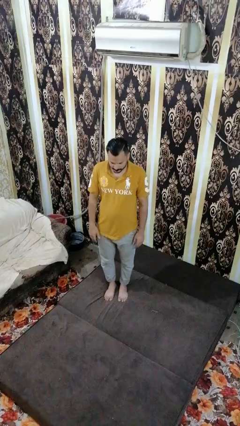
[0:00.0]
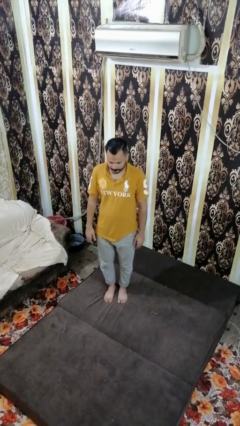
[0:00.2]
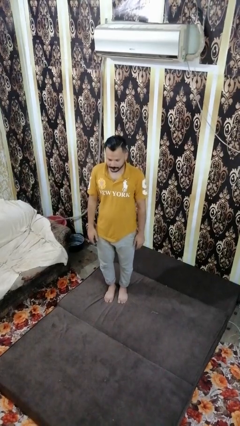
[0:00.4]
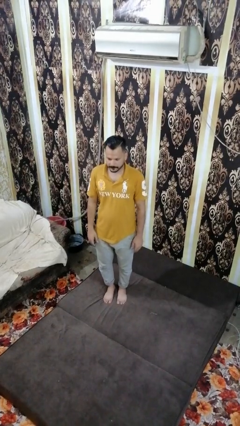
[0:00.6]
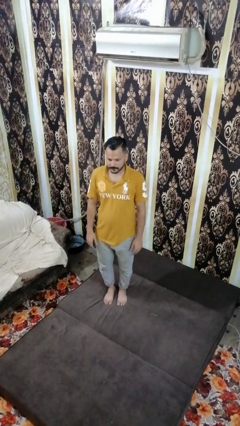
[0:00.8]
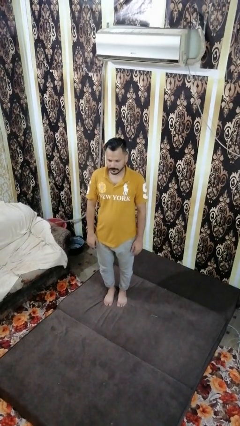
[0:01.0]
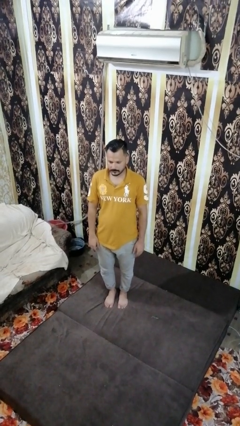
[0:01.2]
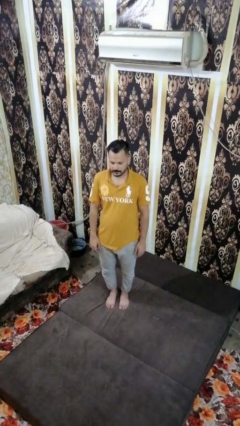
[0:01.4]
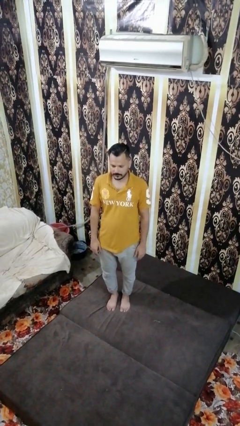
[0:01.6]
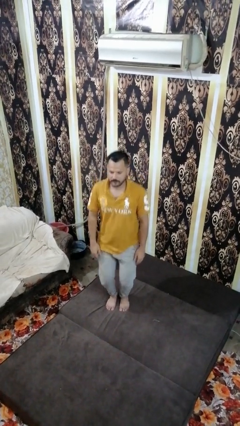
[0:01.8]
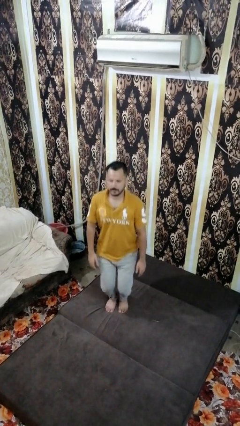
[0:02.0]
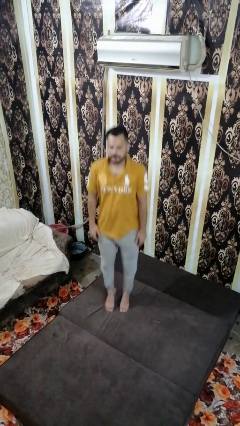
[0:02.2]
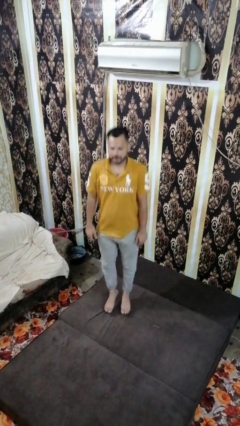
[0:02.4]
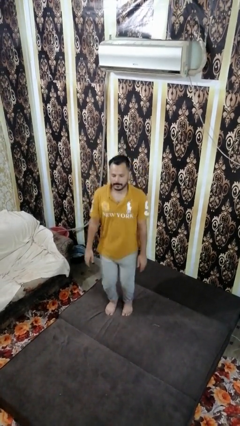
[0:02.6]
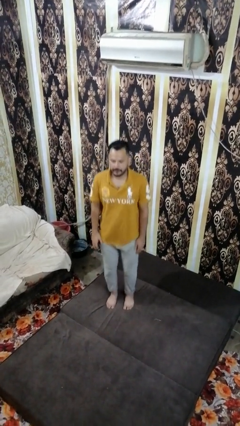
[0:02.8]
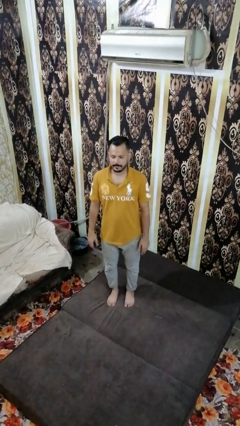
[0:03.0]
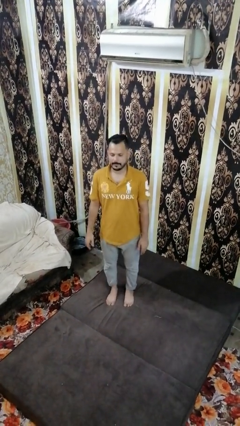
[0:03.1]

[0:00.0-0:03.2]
person jumps on bed

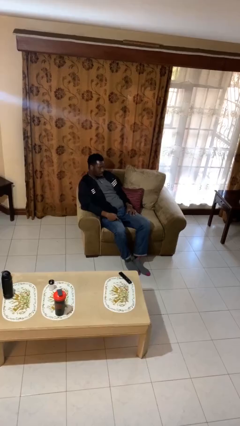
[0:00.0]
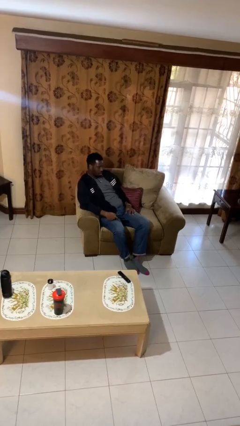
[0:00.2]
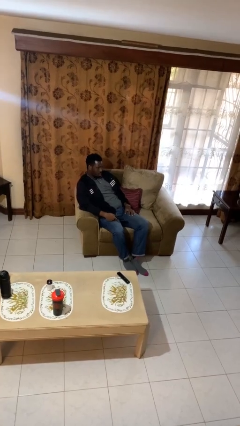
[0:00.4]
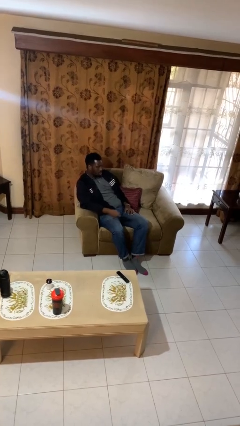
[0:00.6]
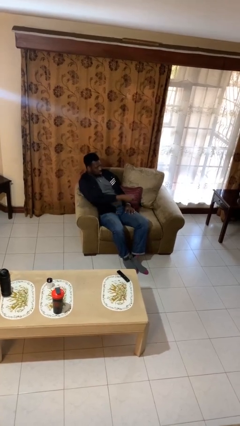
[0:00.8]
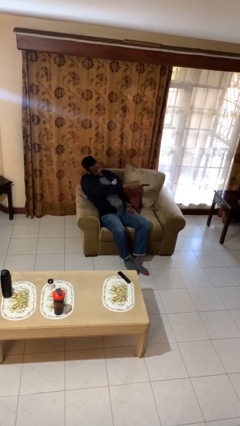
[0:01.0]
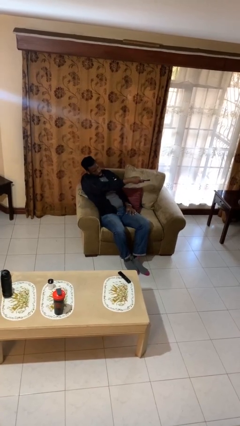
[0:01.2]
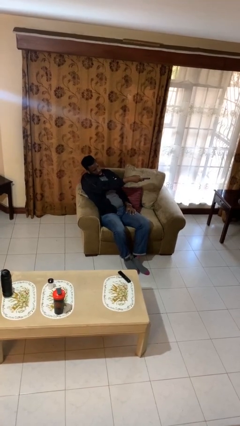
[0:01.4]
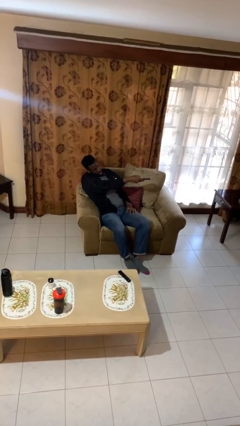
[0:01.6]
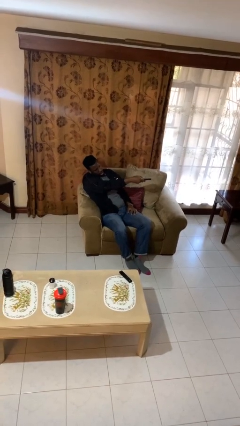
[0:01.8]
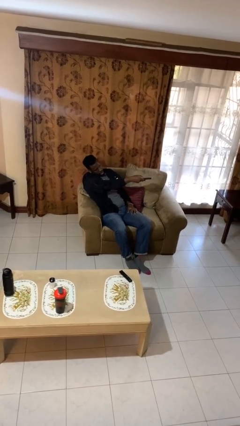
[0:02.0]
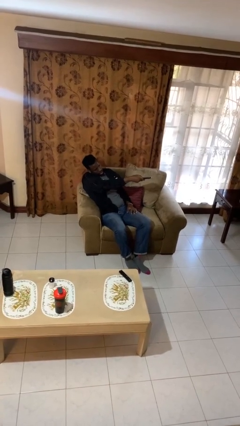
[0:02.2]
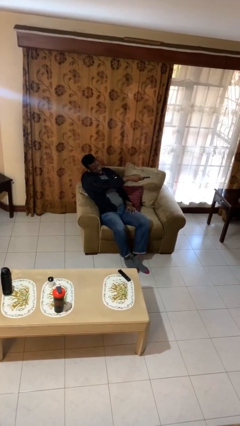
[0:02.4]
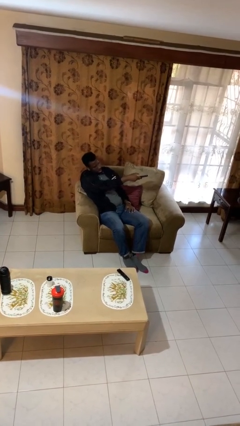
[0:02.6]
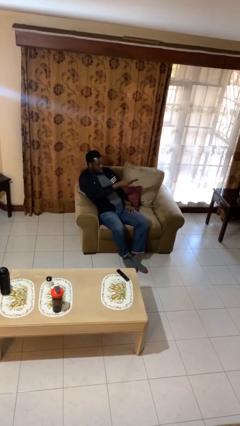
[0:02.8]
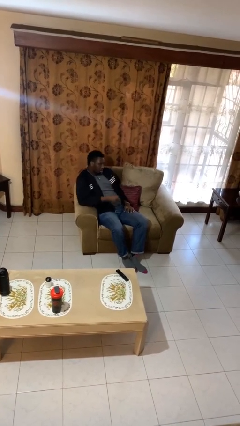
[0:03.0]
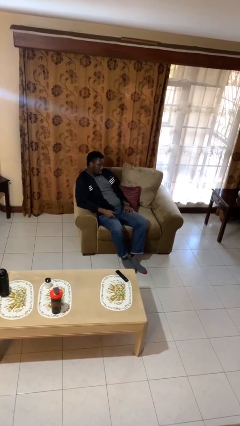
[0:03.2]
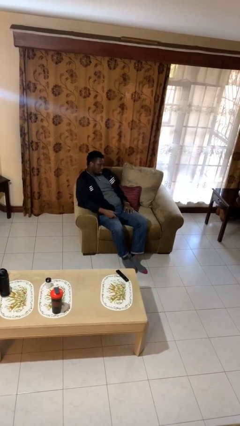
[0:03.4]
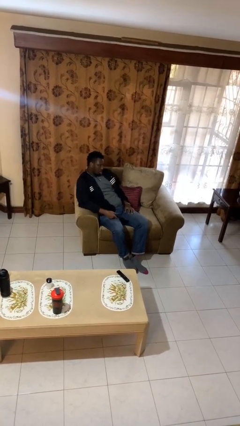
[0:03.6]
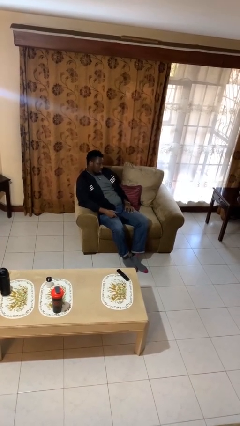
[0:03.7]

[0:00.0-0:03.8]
person uses television remote

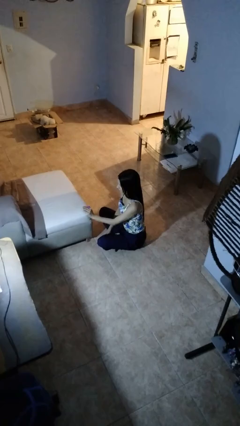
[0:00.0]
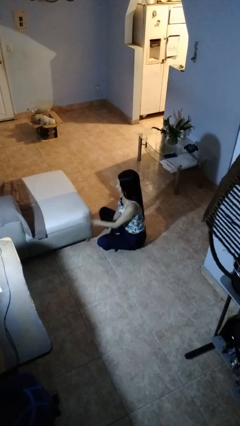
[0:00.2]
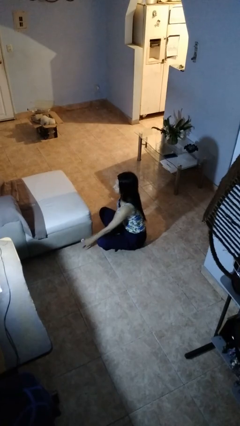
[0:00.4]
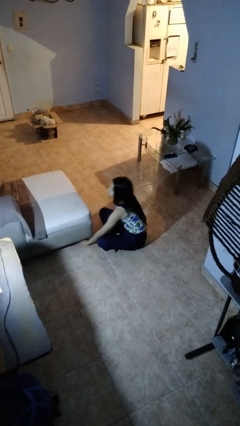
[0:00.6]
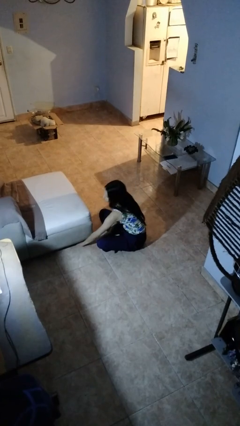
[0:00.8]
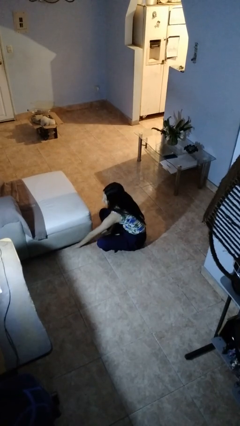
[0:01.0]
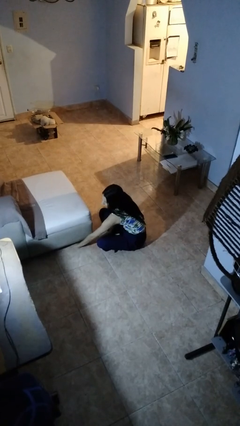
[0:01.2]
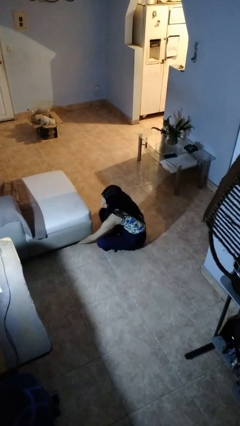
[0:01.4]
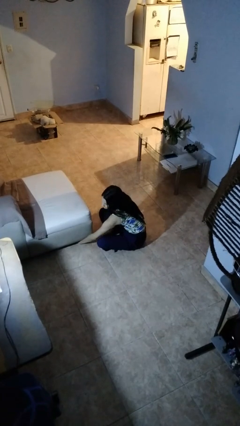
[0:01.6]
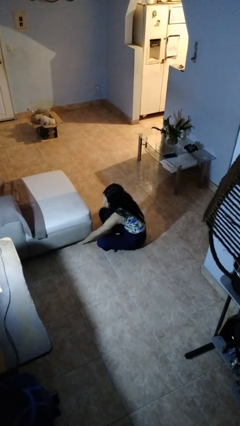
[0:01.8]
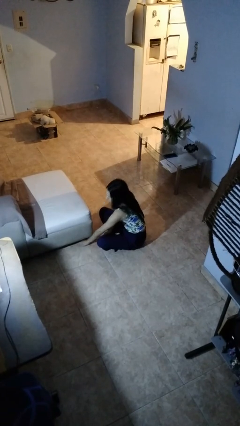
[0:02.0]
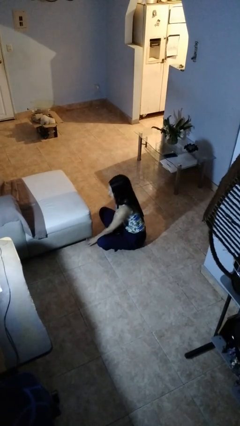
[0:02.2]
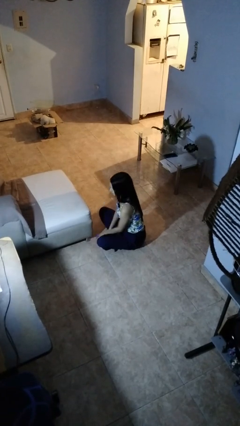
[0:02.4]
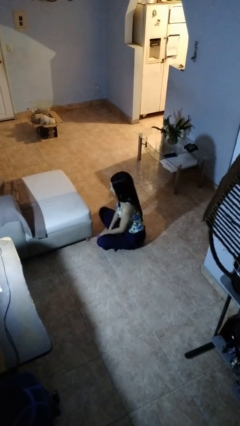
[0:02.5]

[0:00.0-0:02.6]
person searches under couch

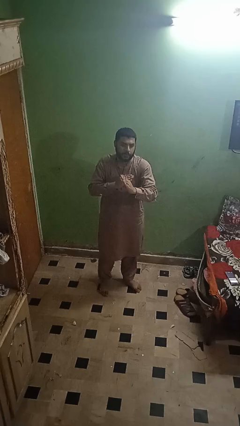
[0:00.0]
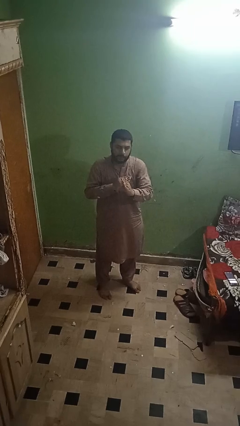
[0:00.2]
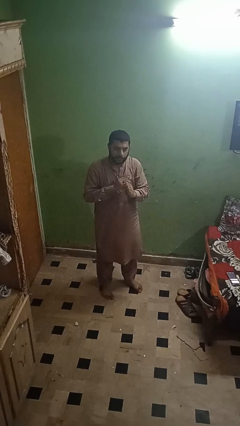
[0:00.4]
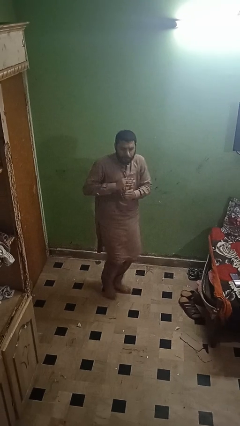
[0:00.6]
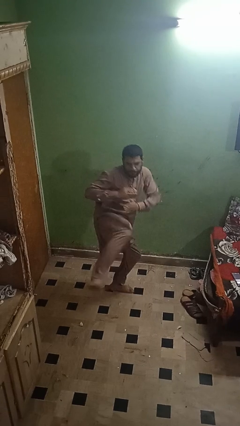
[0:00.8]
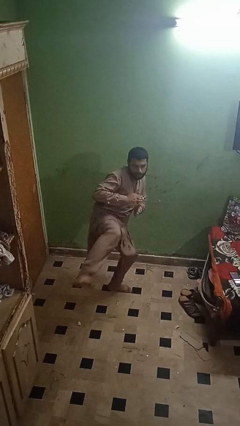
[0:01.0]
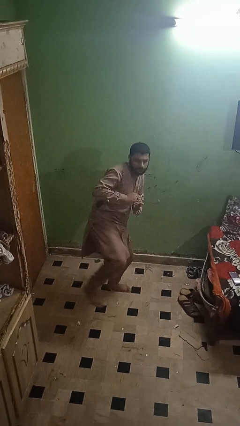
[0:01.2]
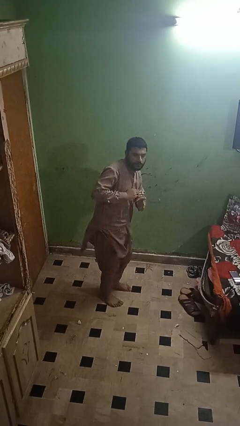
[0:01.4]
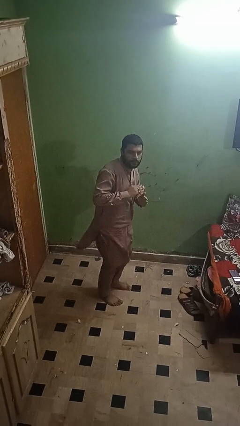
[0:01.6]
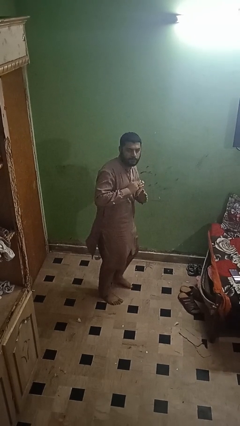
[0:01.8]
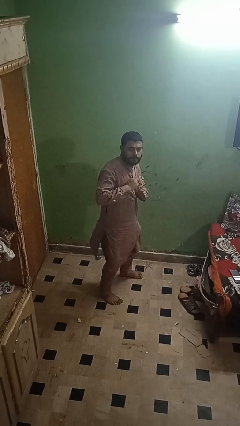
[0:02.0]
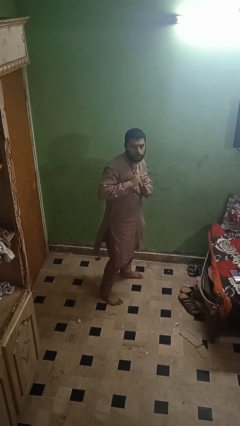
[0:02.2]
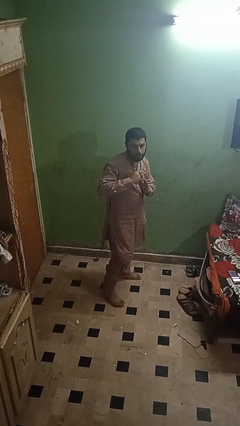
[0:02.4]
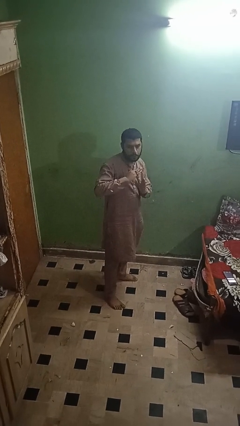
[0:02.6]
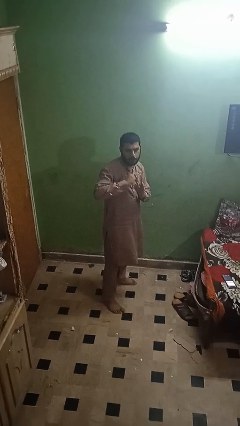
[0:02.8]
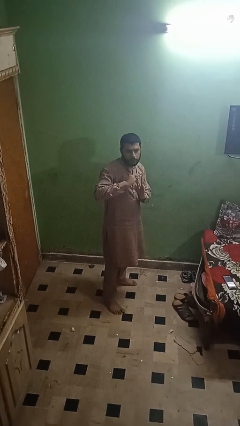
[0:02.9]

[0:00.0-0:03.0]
person karate kicks

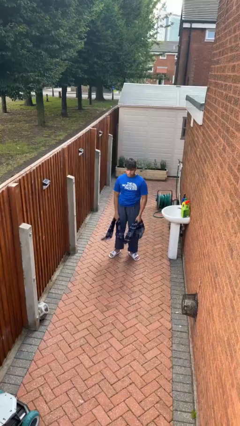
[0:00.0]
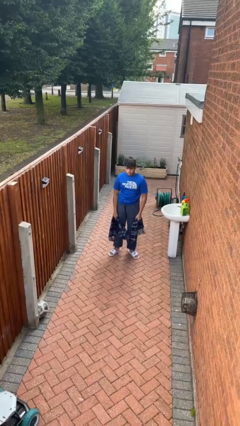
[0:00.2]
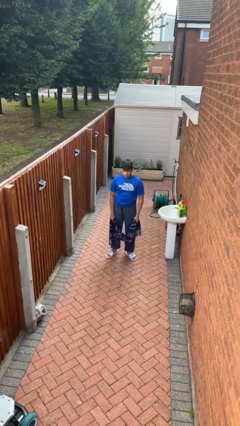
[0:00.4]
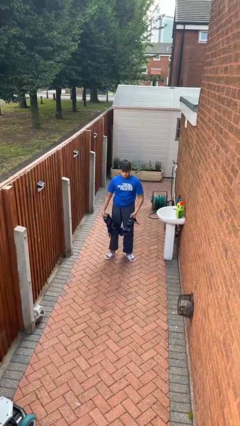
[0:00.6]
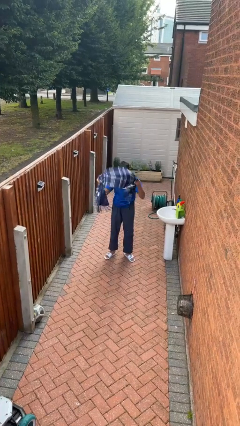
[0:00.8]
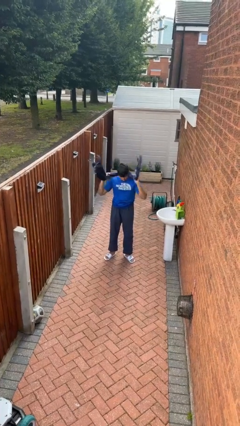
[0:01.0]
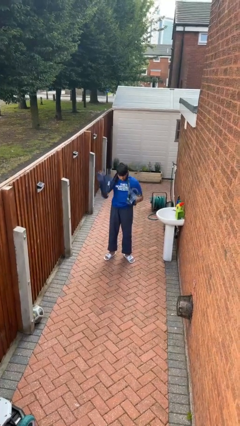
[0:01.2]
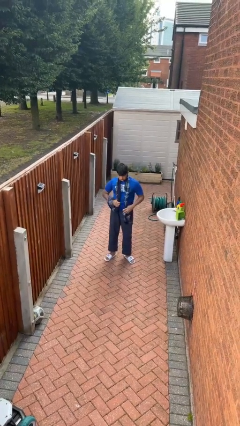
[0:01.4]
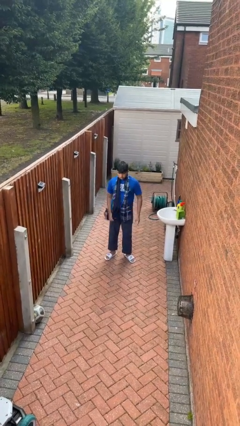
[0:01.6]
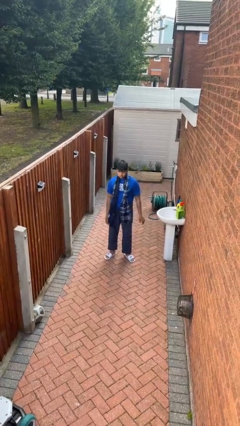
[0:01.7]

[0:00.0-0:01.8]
person puts on scarf

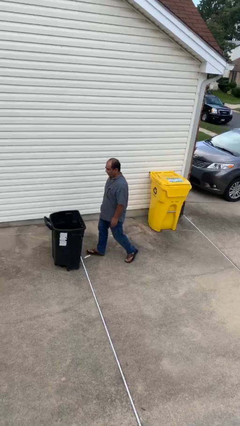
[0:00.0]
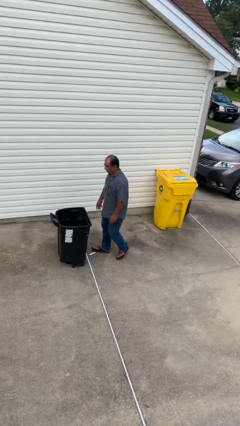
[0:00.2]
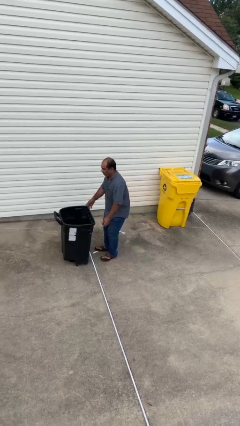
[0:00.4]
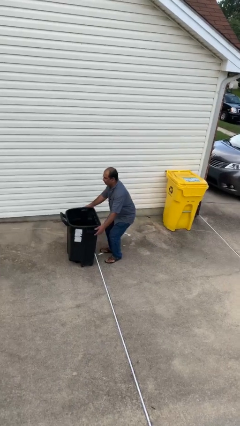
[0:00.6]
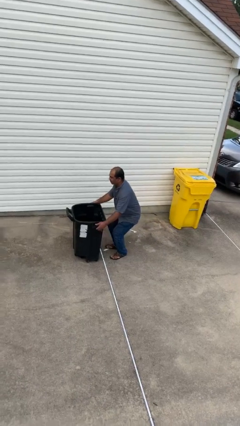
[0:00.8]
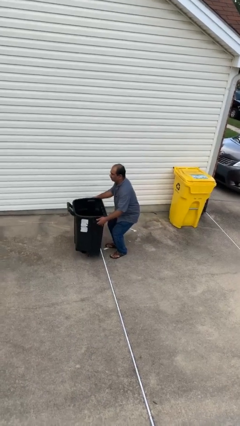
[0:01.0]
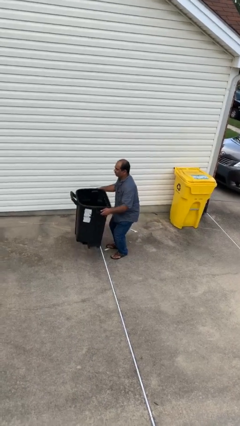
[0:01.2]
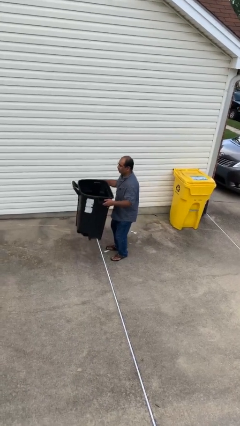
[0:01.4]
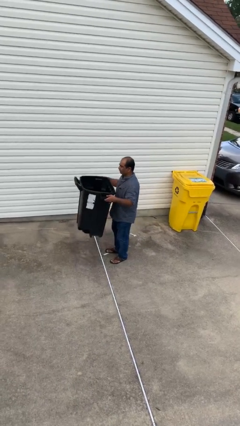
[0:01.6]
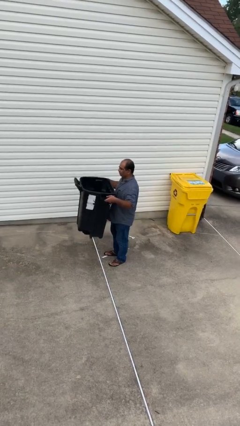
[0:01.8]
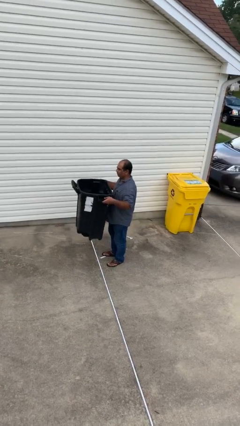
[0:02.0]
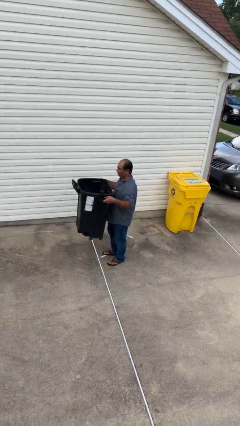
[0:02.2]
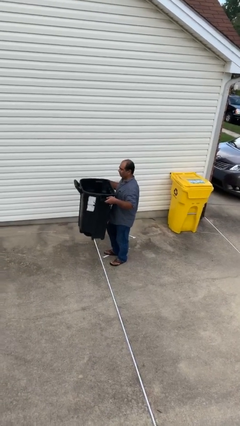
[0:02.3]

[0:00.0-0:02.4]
person picks up object from floor

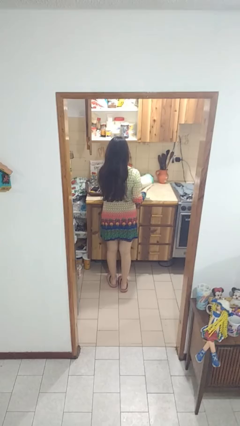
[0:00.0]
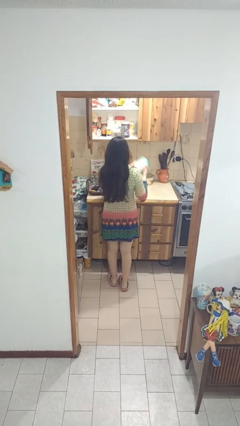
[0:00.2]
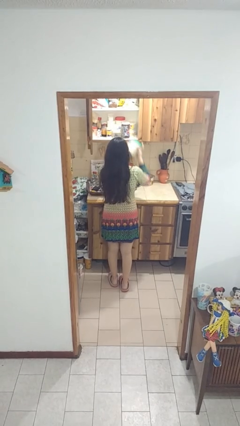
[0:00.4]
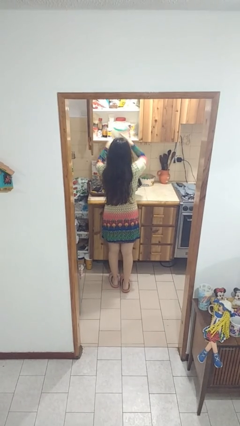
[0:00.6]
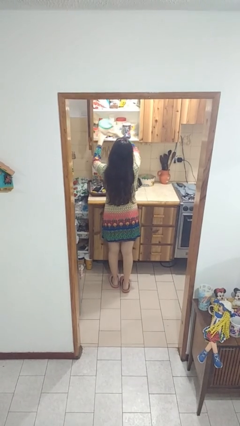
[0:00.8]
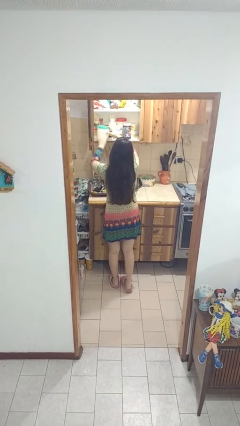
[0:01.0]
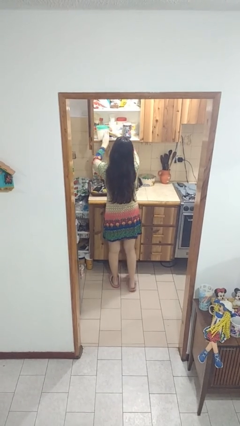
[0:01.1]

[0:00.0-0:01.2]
person puts object in cabinet
